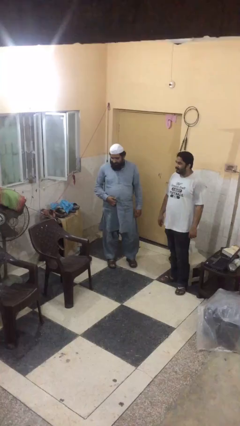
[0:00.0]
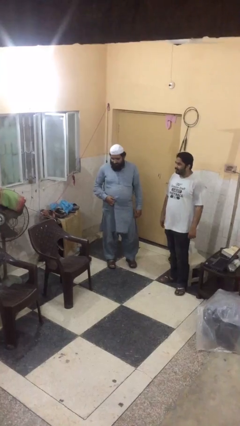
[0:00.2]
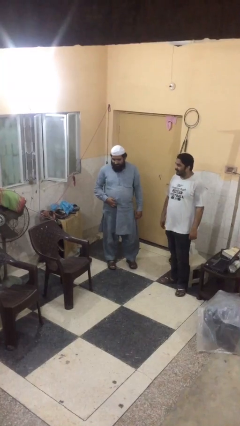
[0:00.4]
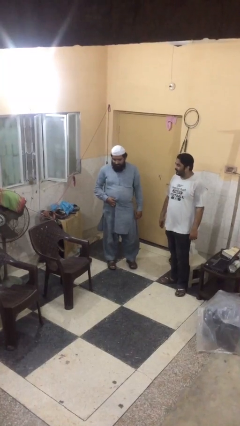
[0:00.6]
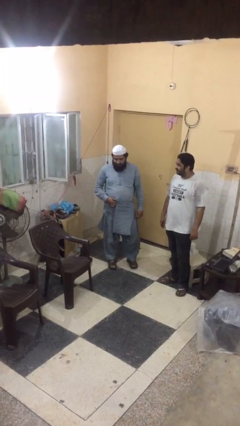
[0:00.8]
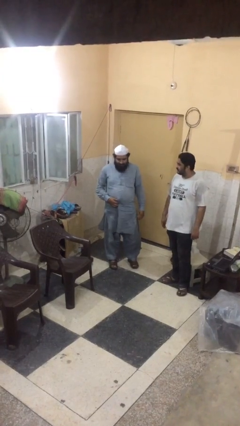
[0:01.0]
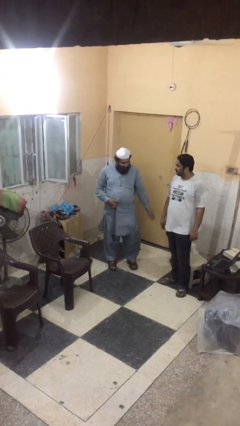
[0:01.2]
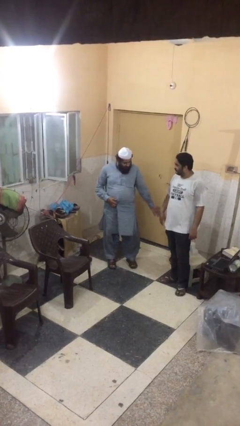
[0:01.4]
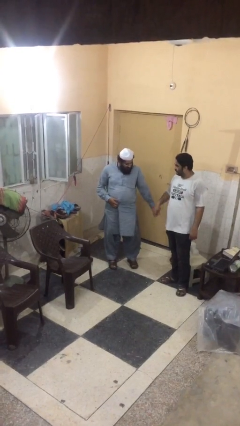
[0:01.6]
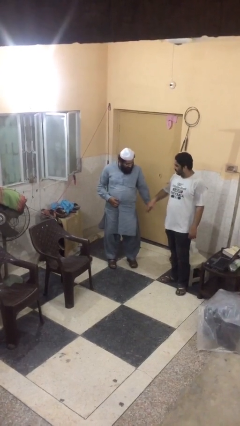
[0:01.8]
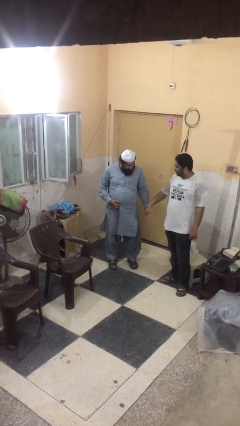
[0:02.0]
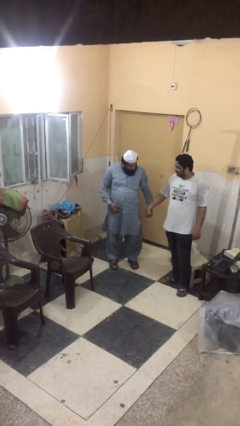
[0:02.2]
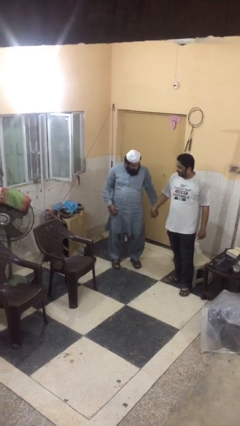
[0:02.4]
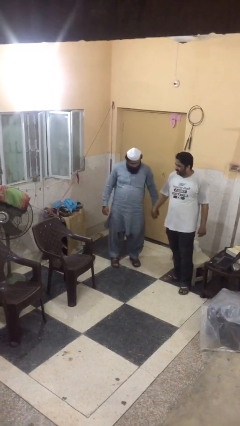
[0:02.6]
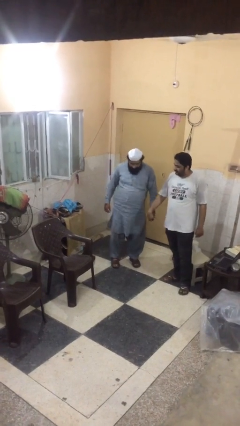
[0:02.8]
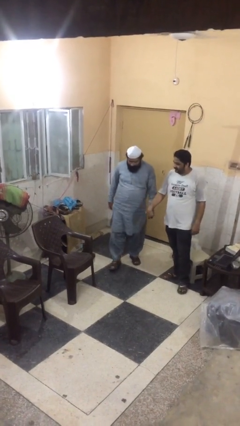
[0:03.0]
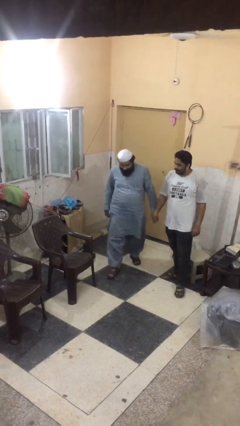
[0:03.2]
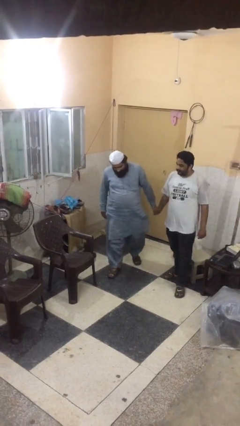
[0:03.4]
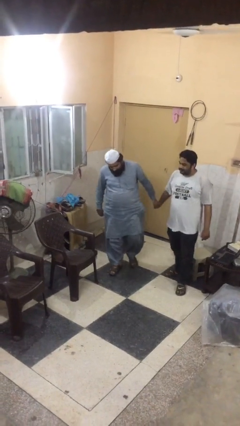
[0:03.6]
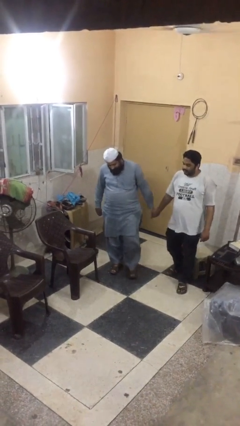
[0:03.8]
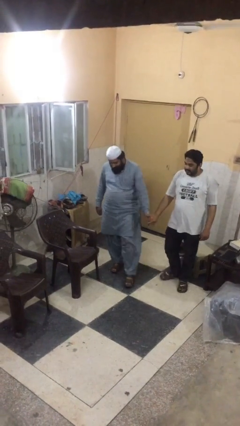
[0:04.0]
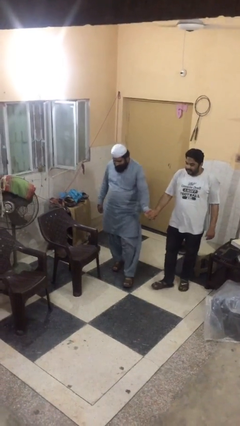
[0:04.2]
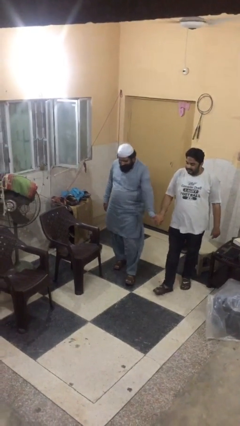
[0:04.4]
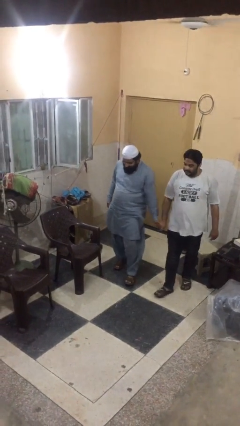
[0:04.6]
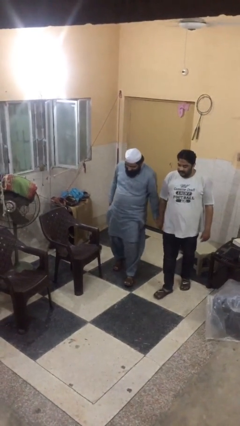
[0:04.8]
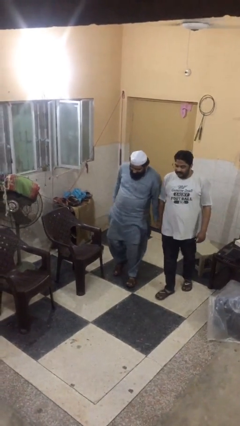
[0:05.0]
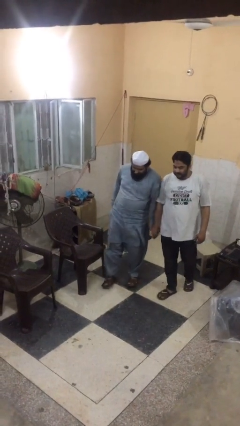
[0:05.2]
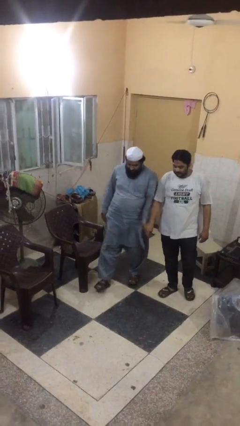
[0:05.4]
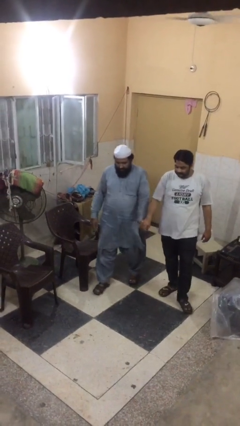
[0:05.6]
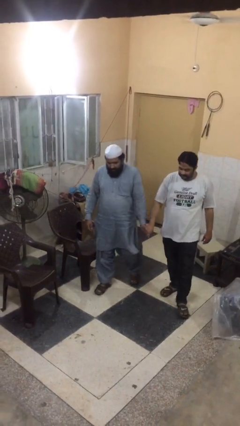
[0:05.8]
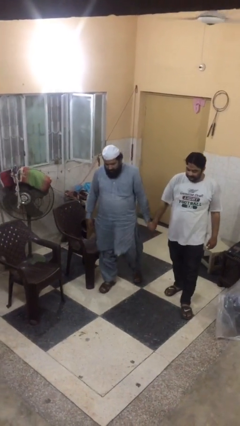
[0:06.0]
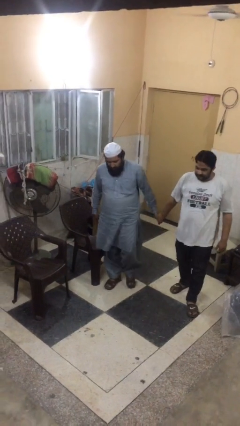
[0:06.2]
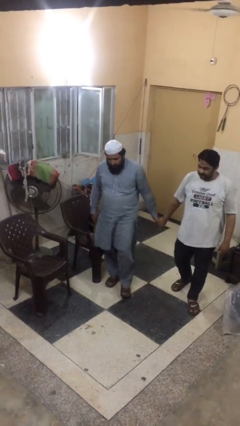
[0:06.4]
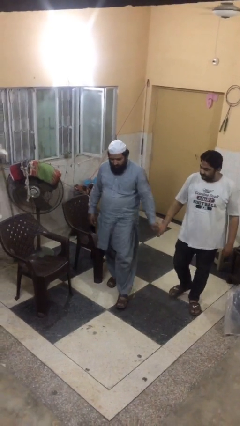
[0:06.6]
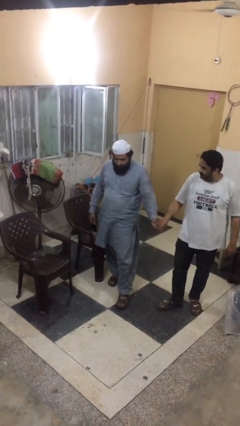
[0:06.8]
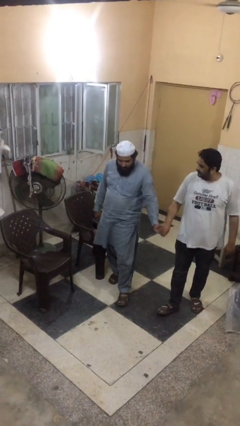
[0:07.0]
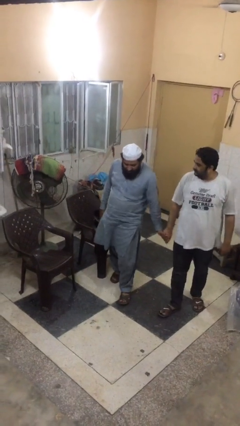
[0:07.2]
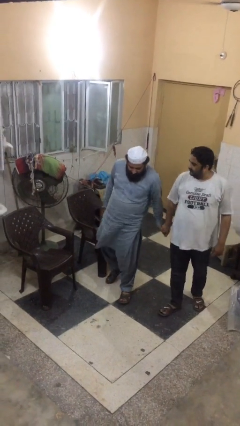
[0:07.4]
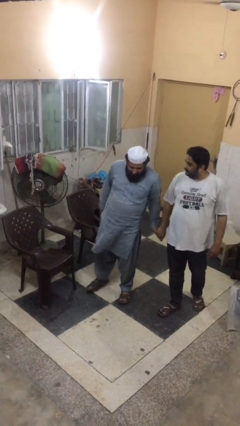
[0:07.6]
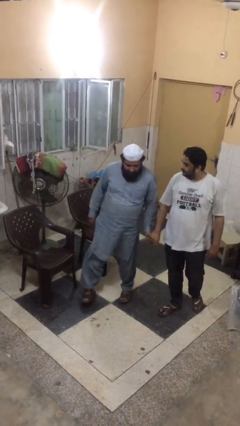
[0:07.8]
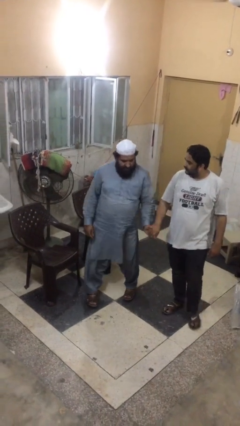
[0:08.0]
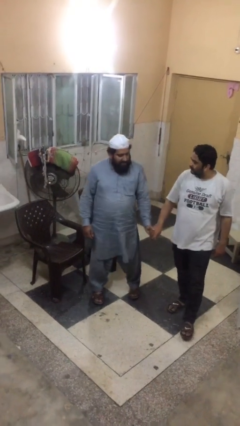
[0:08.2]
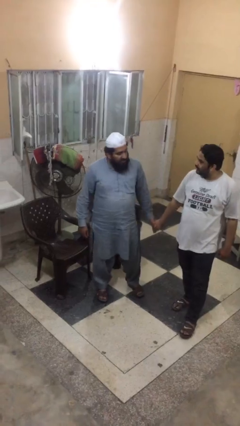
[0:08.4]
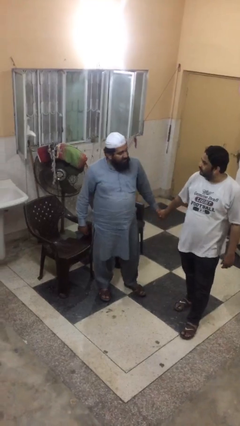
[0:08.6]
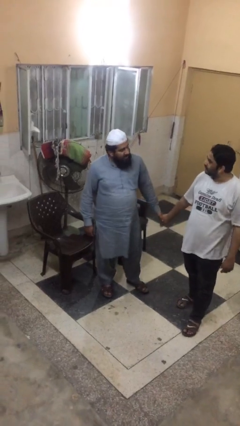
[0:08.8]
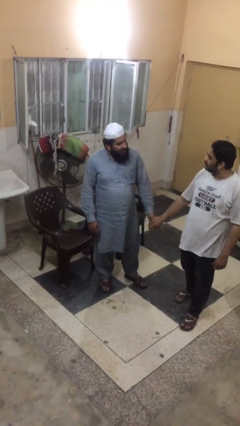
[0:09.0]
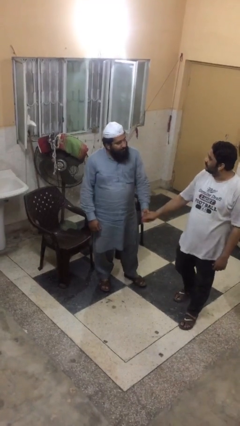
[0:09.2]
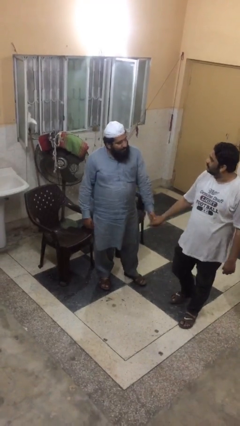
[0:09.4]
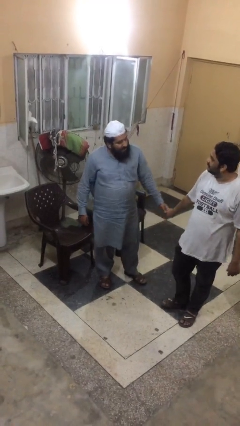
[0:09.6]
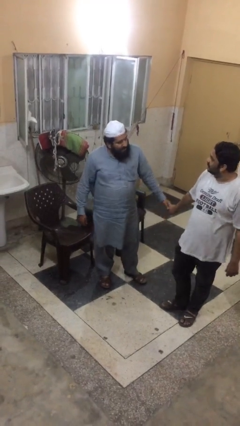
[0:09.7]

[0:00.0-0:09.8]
person holds hand

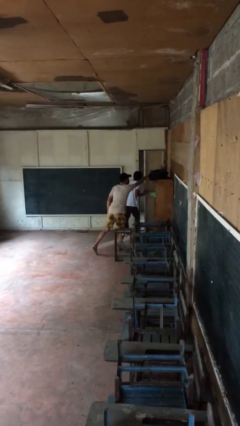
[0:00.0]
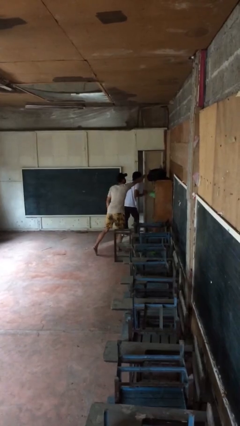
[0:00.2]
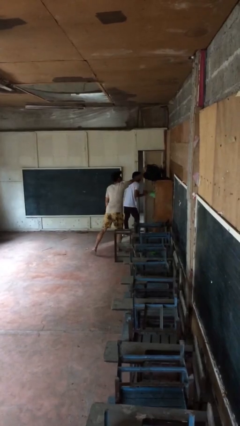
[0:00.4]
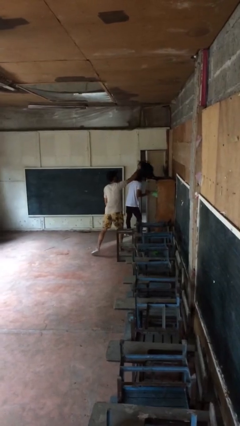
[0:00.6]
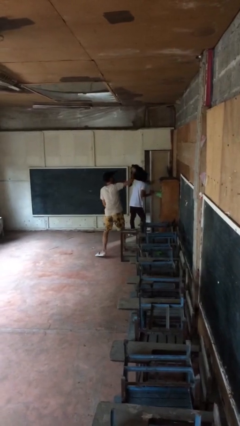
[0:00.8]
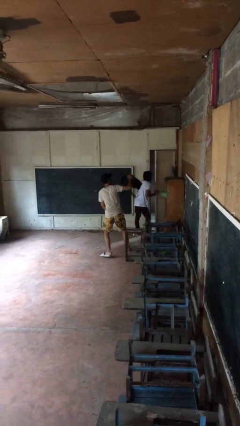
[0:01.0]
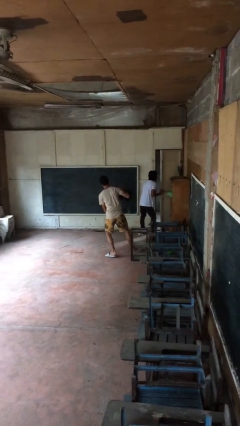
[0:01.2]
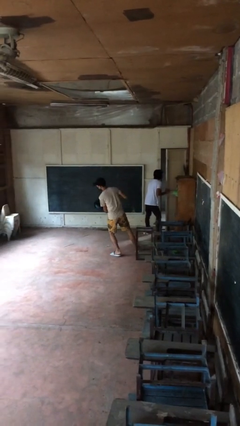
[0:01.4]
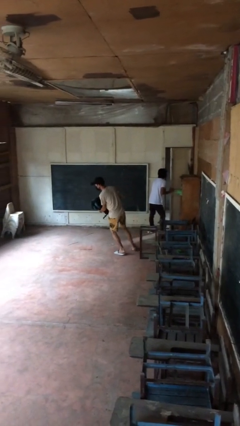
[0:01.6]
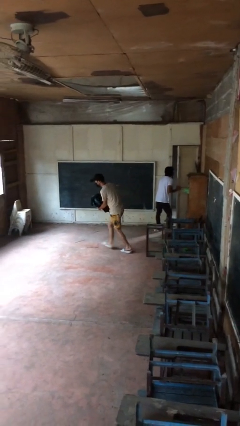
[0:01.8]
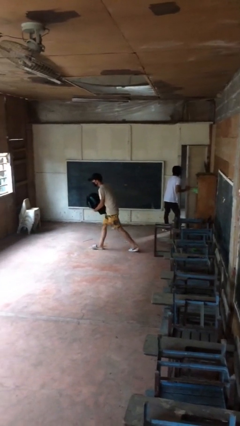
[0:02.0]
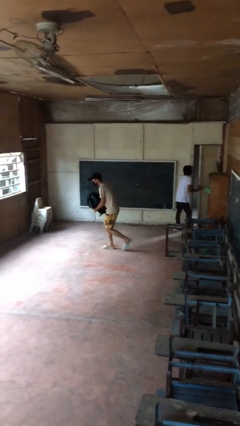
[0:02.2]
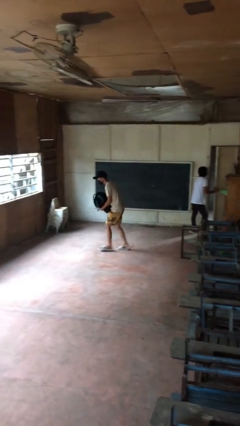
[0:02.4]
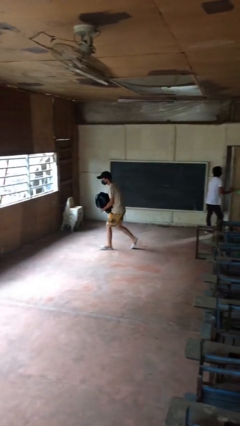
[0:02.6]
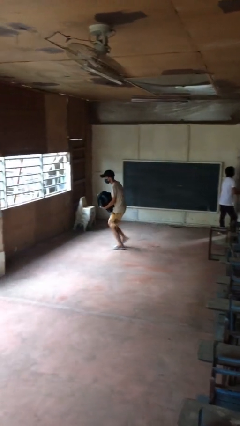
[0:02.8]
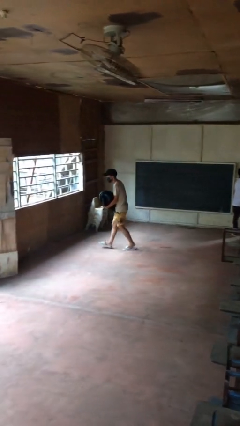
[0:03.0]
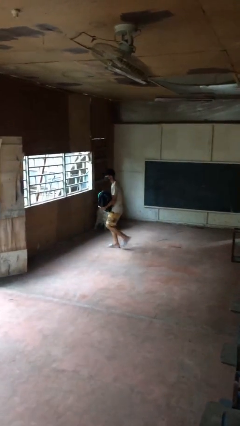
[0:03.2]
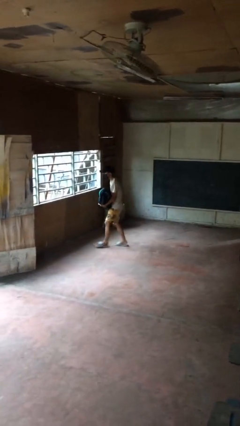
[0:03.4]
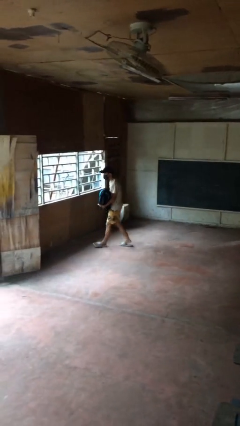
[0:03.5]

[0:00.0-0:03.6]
person steals object from person

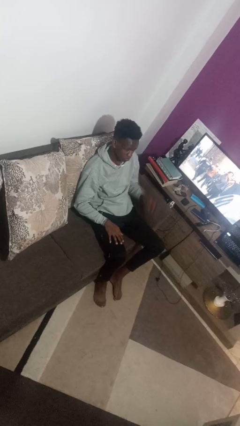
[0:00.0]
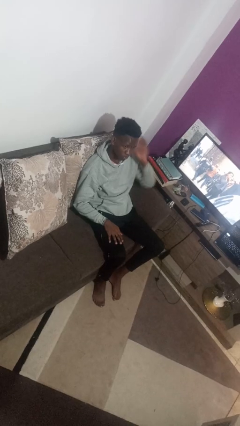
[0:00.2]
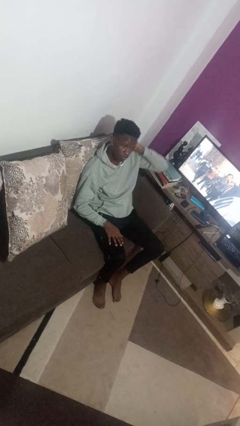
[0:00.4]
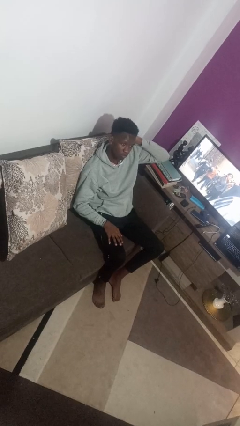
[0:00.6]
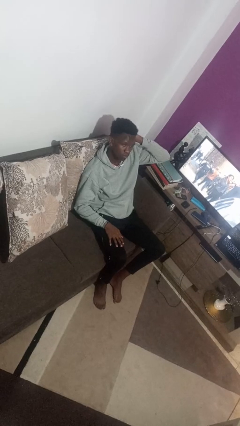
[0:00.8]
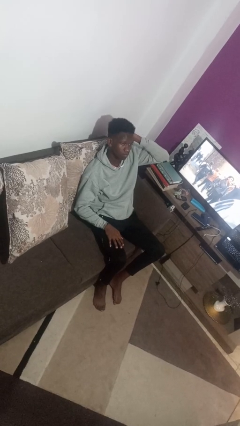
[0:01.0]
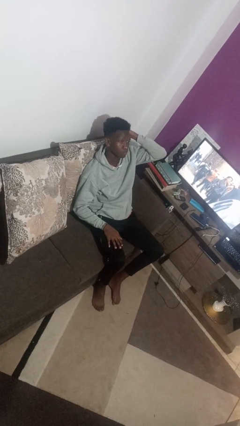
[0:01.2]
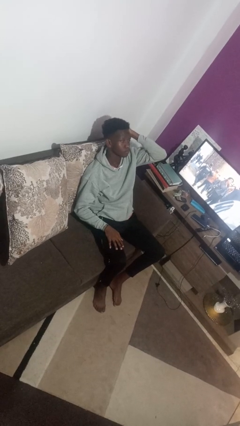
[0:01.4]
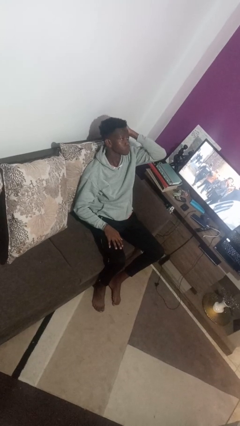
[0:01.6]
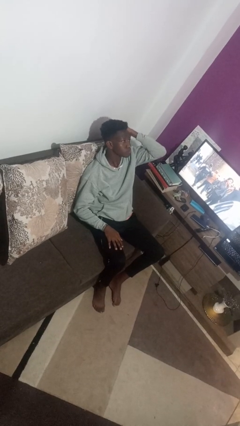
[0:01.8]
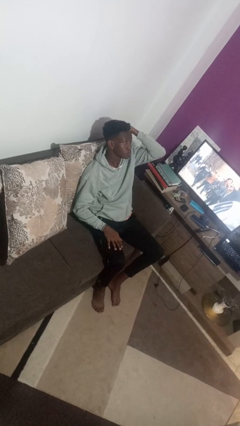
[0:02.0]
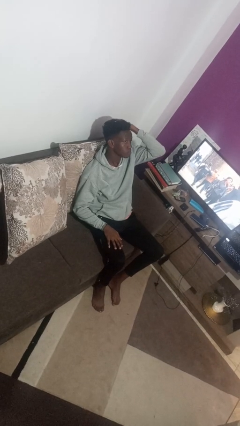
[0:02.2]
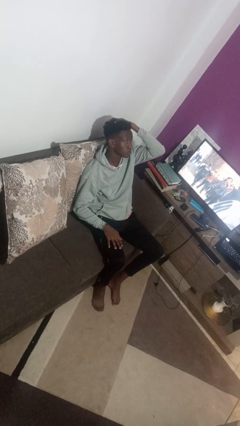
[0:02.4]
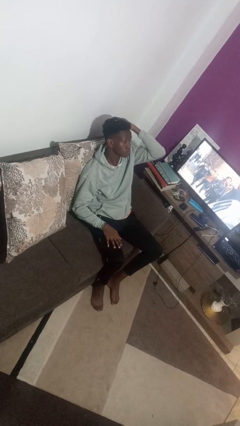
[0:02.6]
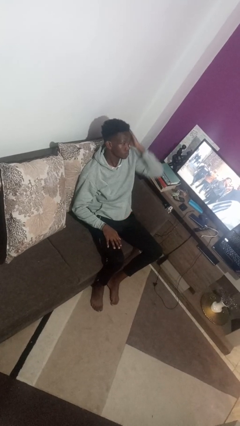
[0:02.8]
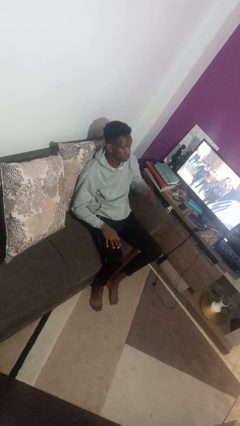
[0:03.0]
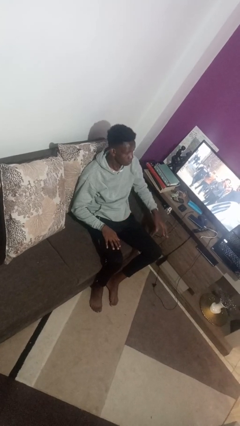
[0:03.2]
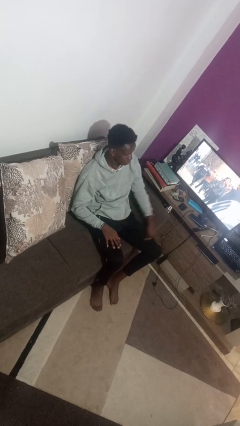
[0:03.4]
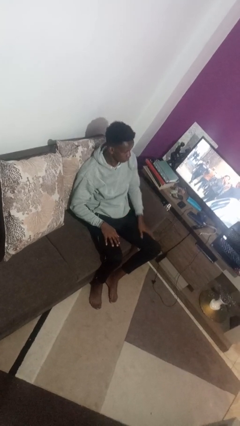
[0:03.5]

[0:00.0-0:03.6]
person strokes hair

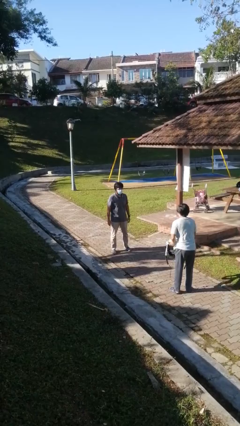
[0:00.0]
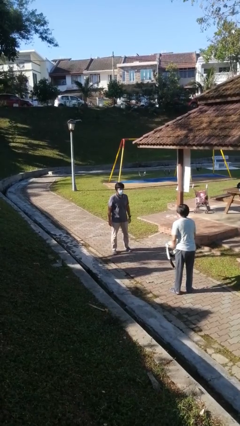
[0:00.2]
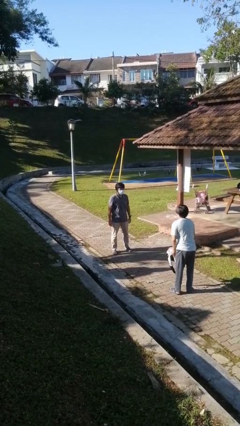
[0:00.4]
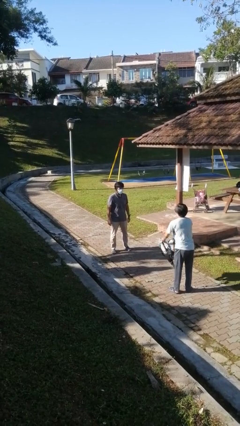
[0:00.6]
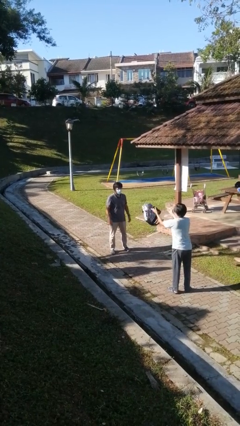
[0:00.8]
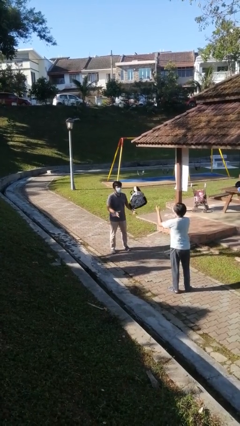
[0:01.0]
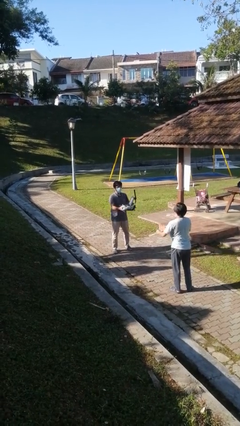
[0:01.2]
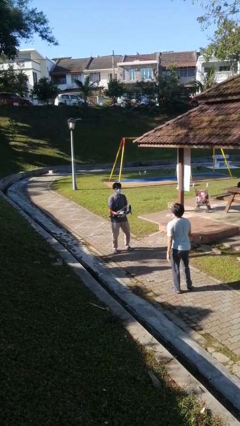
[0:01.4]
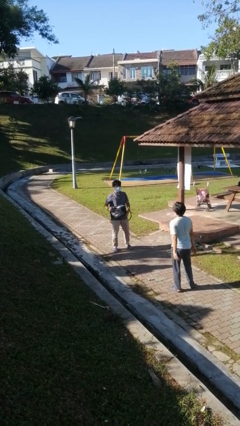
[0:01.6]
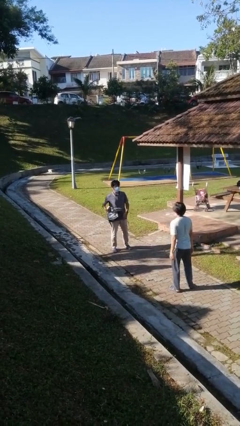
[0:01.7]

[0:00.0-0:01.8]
person catches object from person
